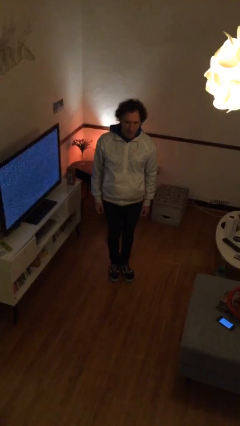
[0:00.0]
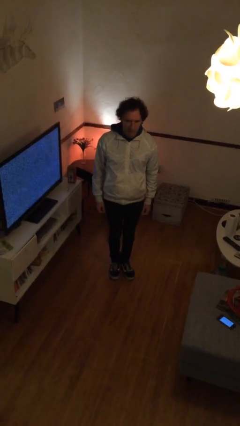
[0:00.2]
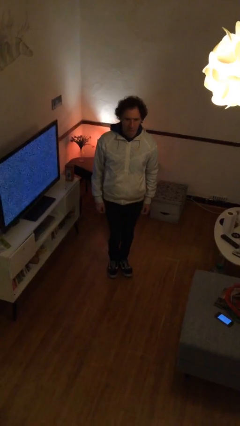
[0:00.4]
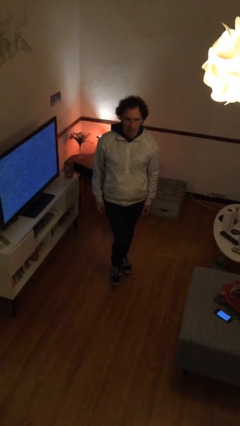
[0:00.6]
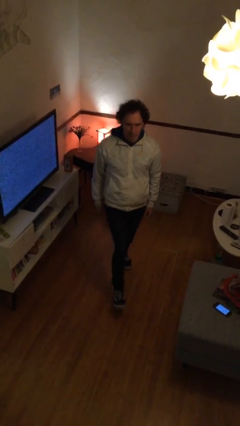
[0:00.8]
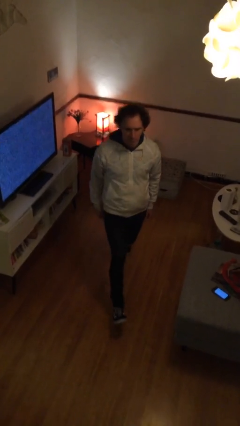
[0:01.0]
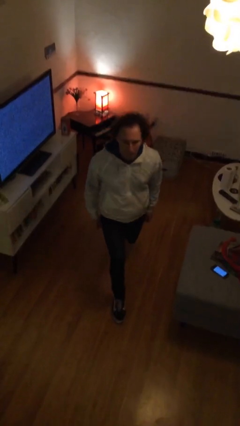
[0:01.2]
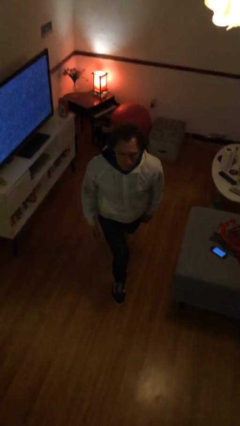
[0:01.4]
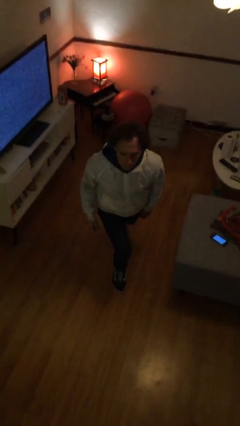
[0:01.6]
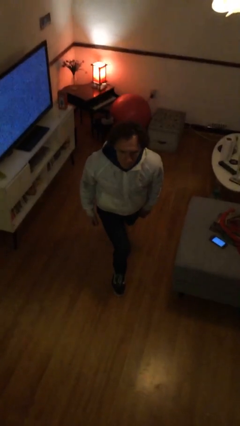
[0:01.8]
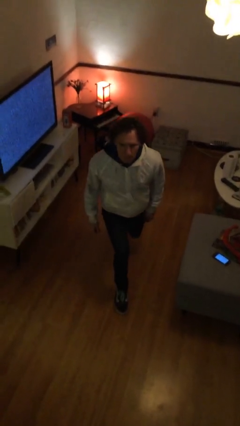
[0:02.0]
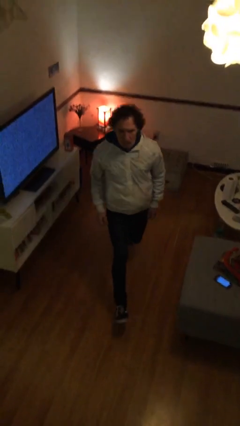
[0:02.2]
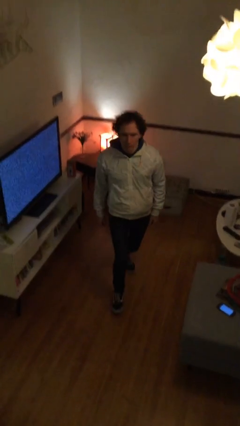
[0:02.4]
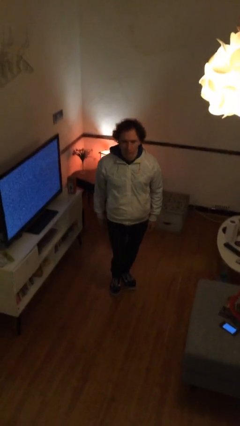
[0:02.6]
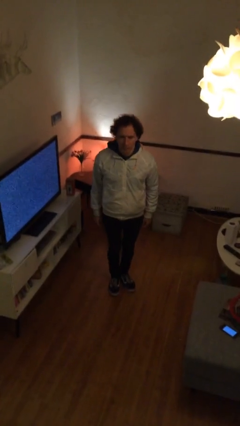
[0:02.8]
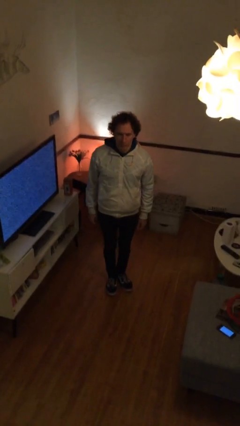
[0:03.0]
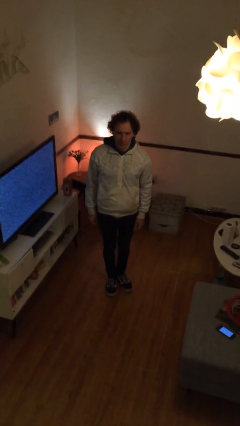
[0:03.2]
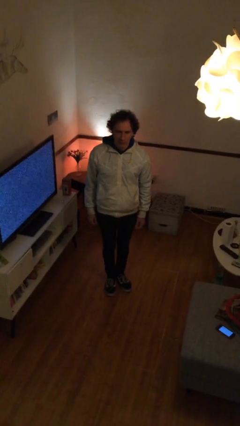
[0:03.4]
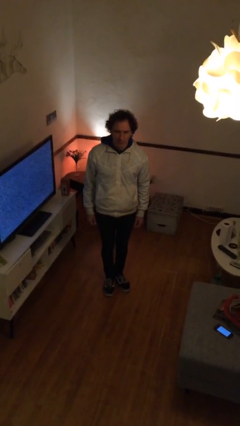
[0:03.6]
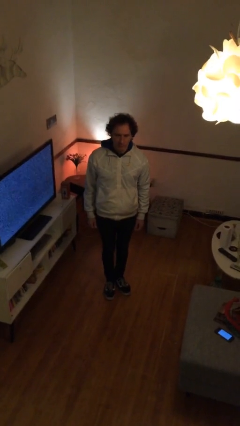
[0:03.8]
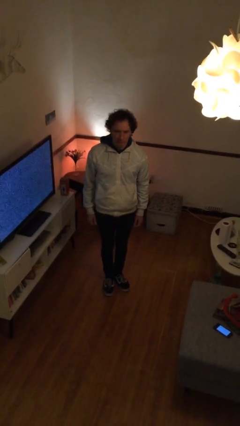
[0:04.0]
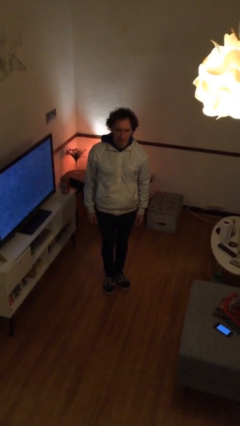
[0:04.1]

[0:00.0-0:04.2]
person exercises with lunges

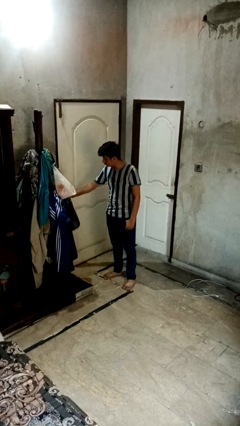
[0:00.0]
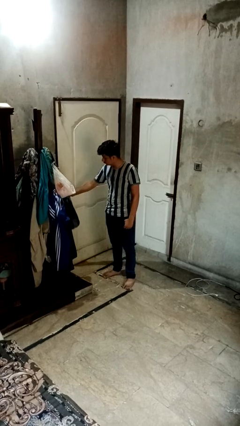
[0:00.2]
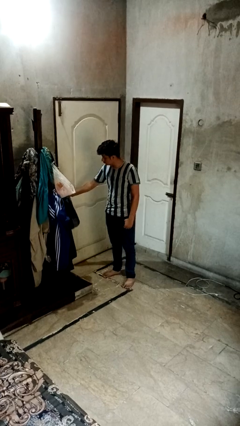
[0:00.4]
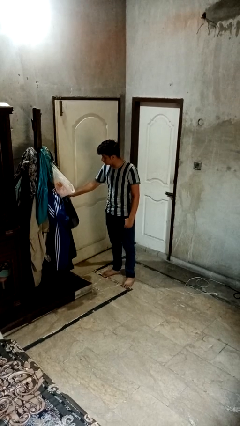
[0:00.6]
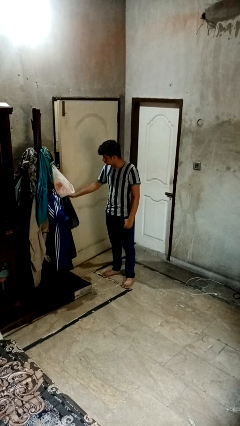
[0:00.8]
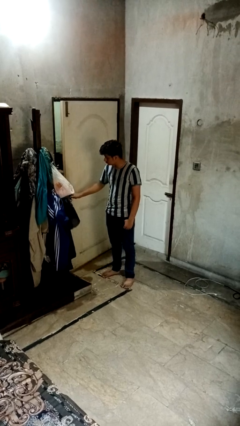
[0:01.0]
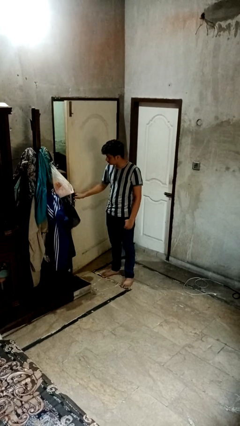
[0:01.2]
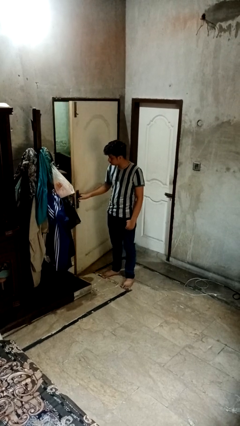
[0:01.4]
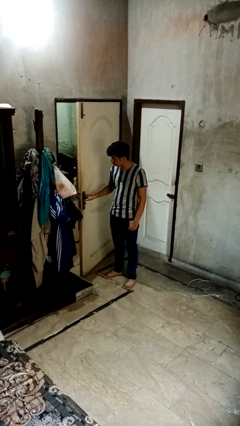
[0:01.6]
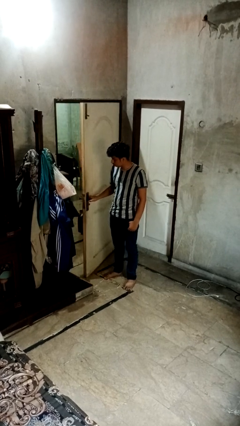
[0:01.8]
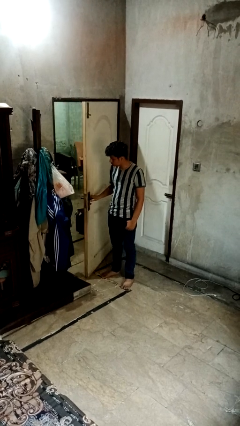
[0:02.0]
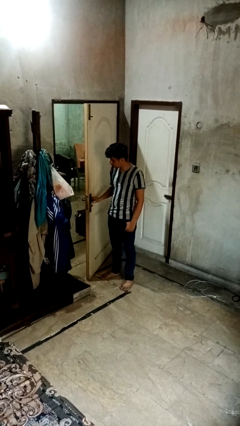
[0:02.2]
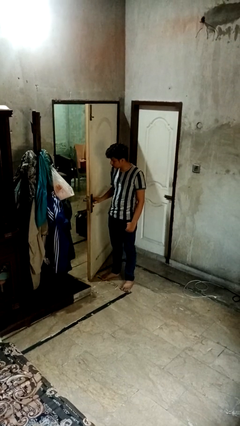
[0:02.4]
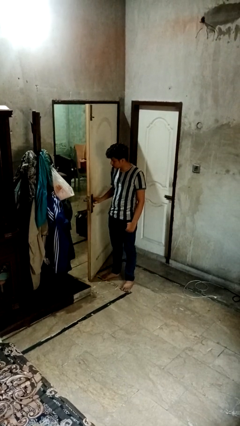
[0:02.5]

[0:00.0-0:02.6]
person opens sliding door

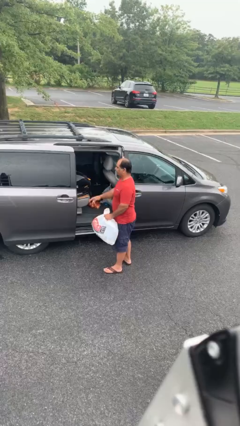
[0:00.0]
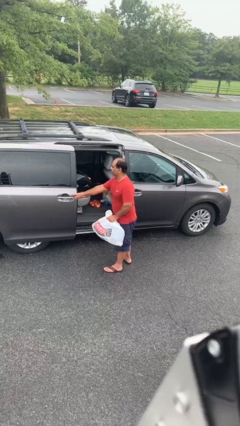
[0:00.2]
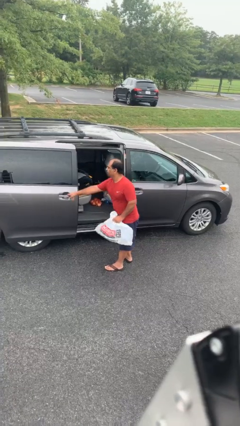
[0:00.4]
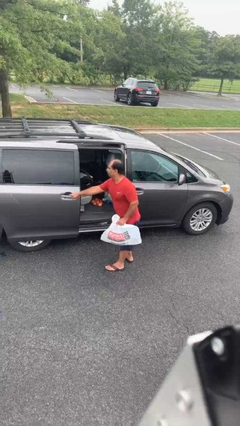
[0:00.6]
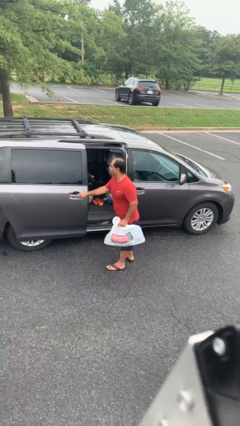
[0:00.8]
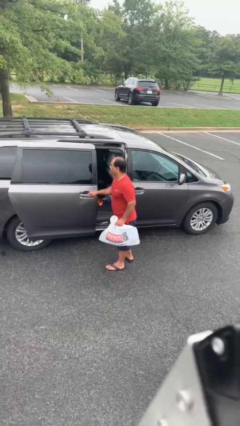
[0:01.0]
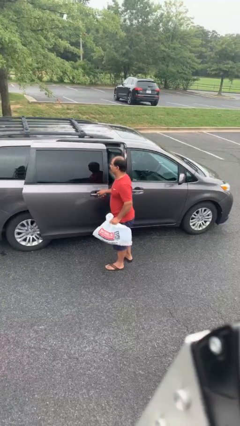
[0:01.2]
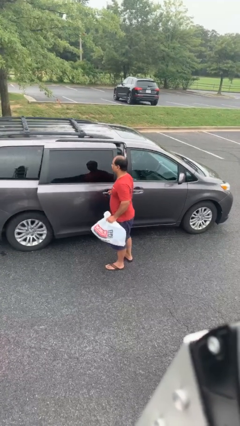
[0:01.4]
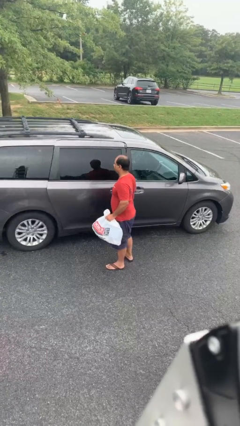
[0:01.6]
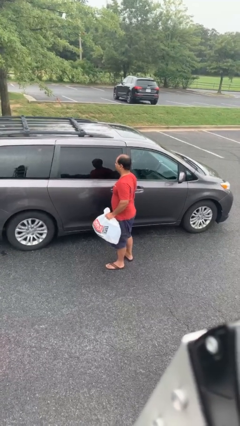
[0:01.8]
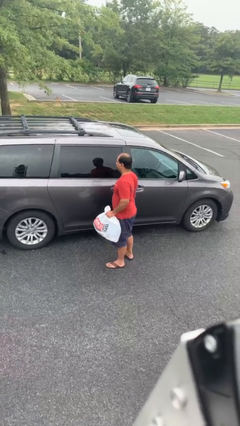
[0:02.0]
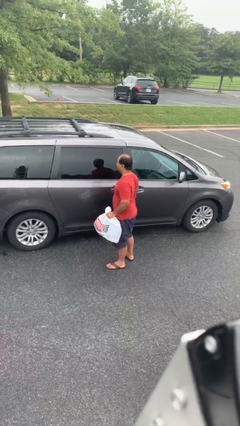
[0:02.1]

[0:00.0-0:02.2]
person closes car door

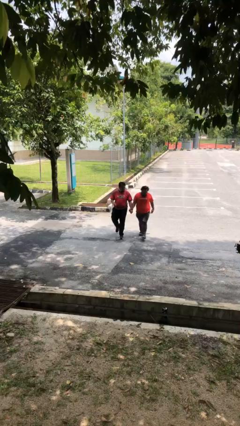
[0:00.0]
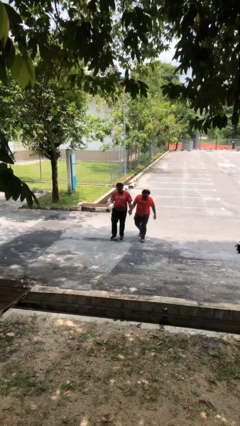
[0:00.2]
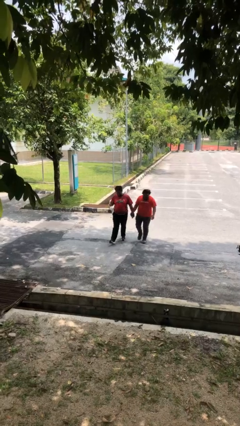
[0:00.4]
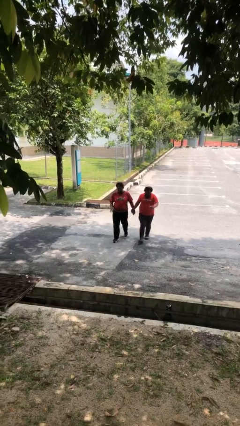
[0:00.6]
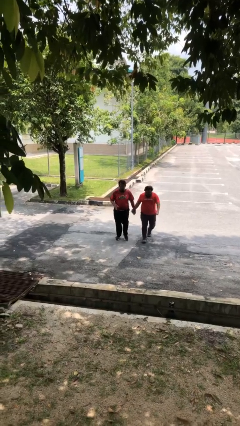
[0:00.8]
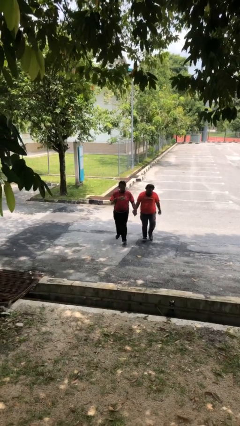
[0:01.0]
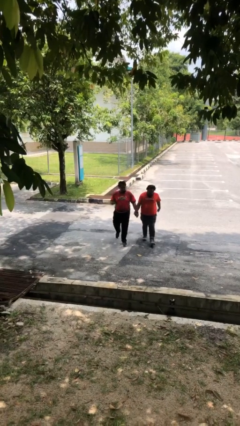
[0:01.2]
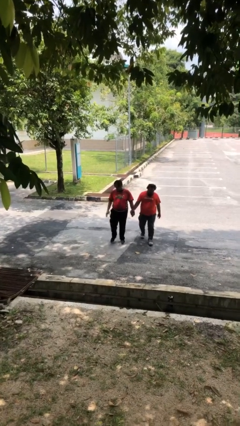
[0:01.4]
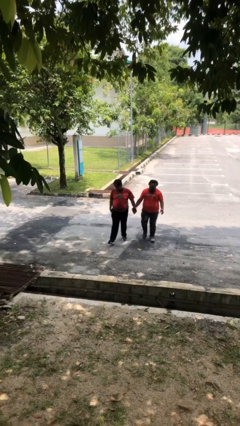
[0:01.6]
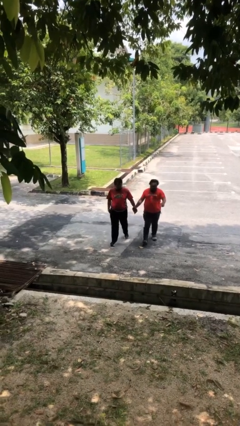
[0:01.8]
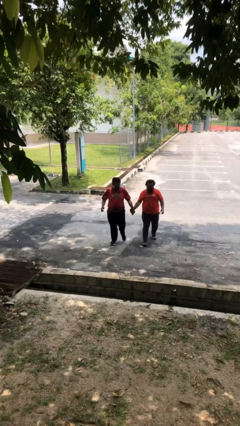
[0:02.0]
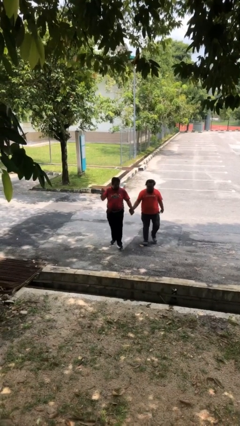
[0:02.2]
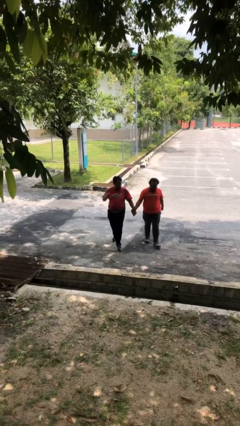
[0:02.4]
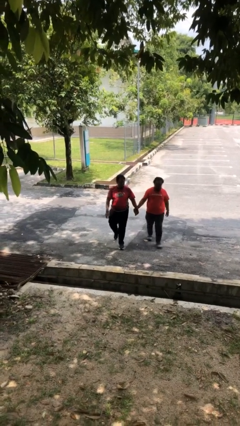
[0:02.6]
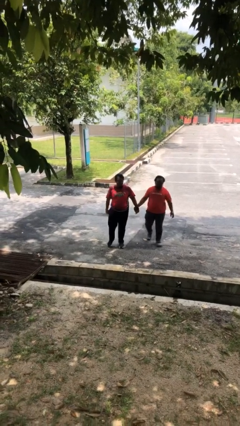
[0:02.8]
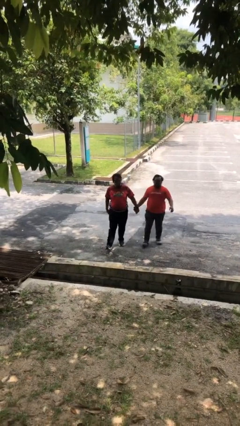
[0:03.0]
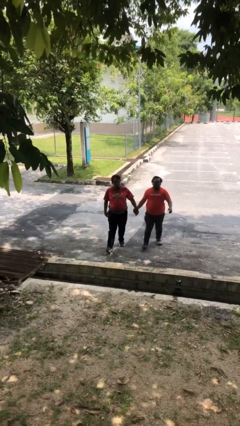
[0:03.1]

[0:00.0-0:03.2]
person holds hand

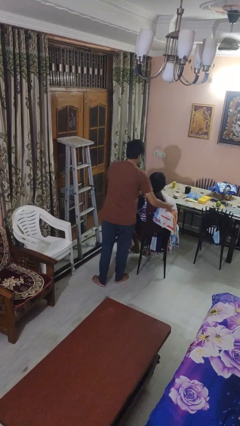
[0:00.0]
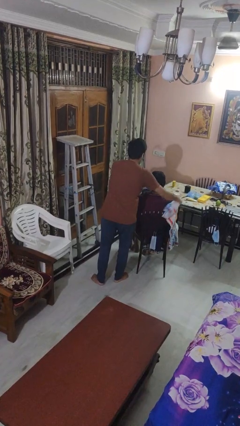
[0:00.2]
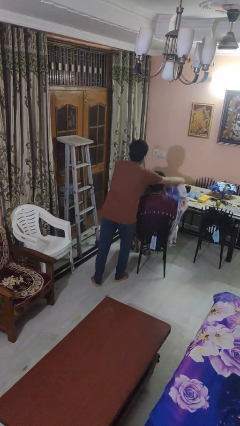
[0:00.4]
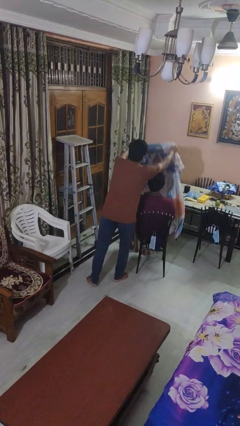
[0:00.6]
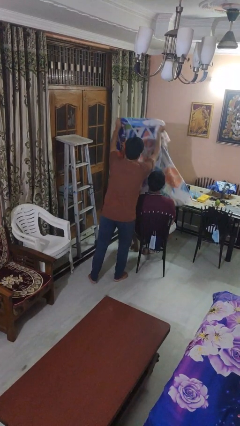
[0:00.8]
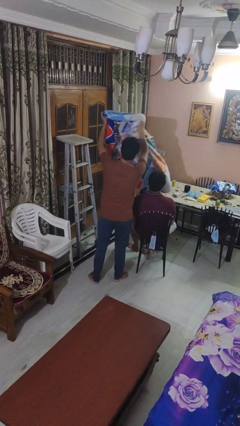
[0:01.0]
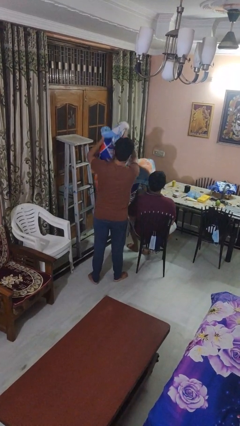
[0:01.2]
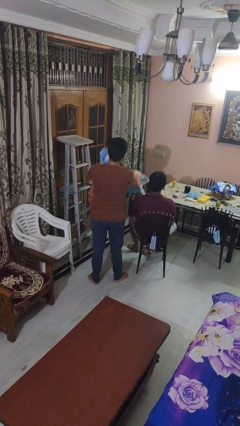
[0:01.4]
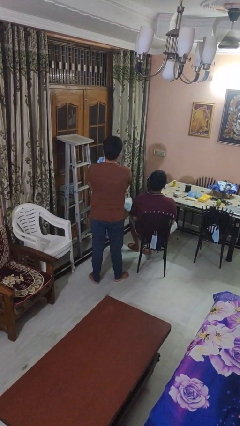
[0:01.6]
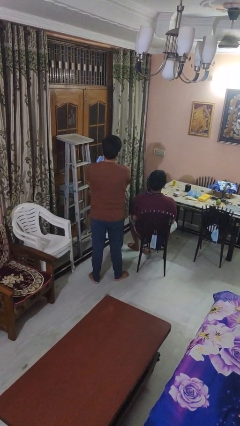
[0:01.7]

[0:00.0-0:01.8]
person uncovers friend with blanket

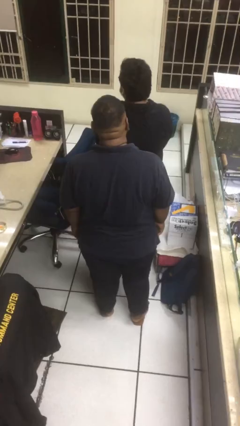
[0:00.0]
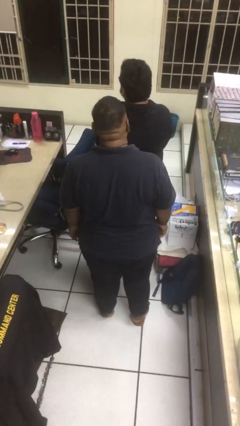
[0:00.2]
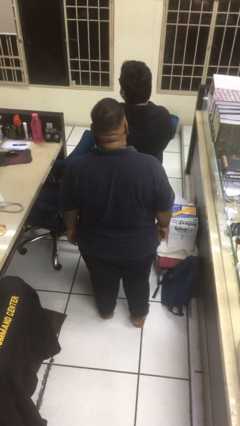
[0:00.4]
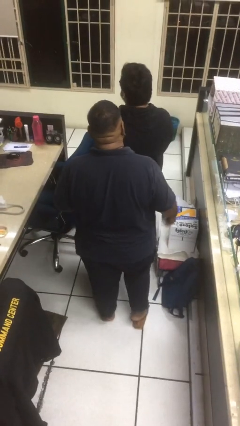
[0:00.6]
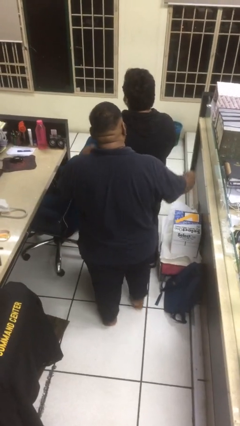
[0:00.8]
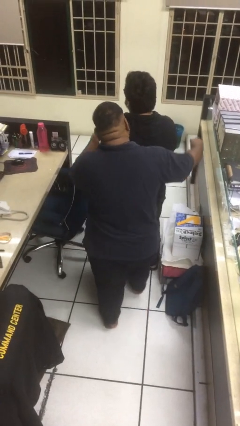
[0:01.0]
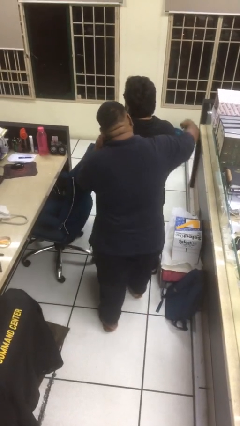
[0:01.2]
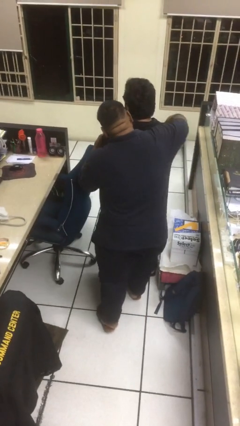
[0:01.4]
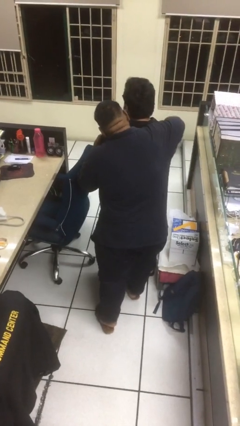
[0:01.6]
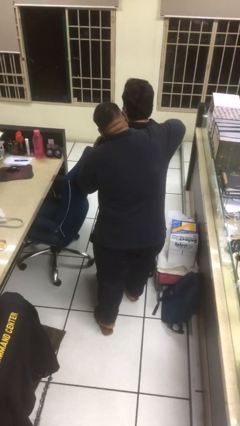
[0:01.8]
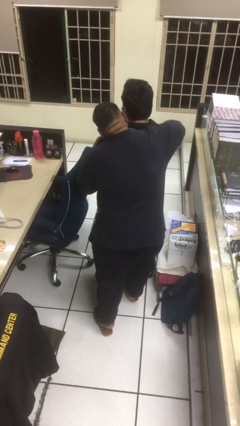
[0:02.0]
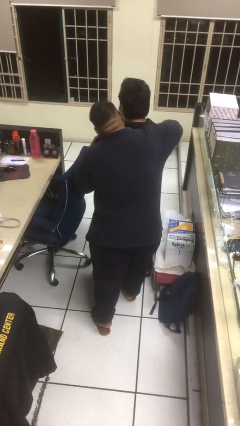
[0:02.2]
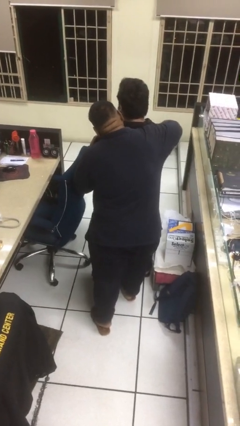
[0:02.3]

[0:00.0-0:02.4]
person hugs person from behind

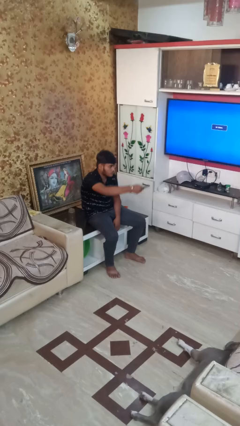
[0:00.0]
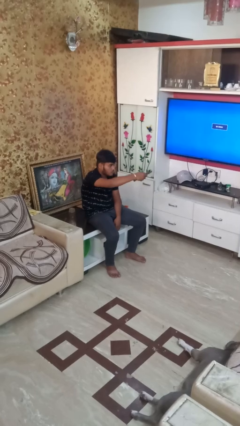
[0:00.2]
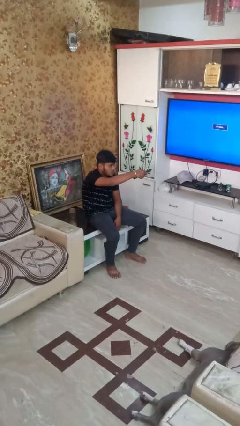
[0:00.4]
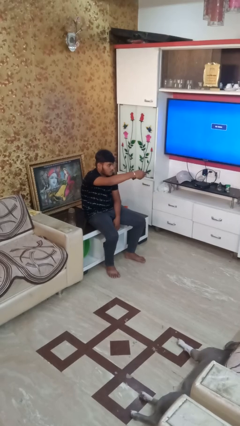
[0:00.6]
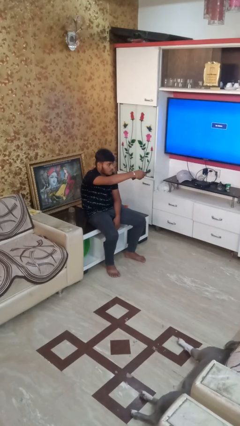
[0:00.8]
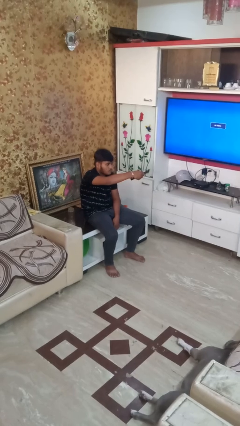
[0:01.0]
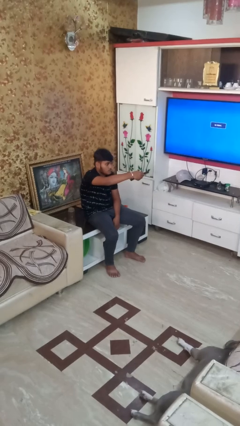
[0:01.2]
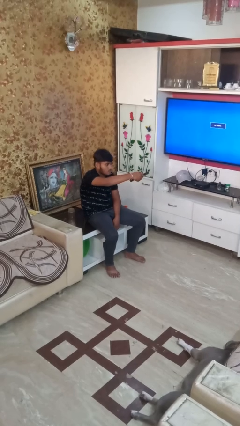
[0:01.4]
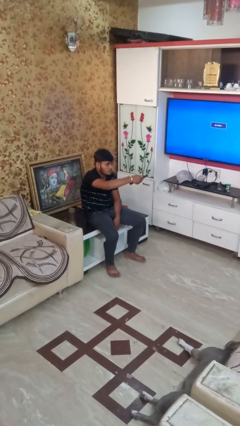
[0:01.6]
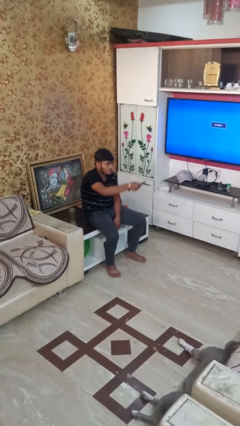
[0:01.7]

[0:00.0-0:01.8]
person uses television remote
